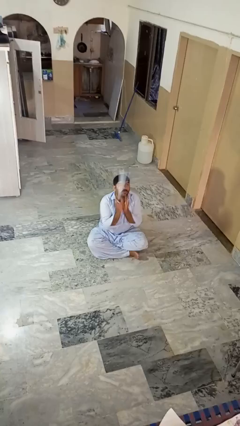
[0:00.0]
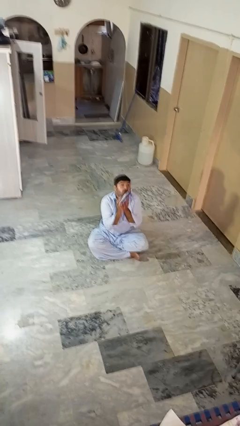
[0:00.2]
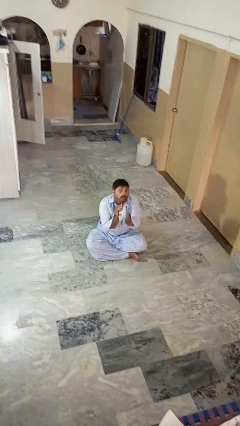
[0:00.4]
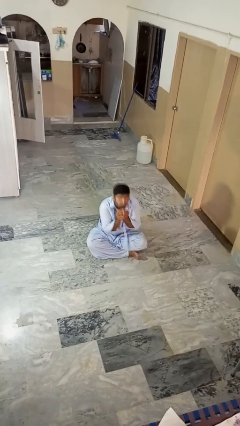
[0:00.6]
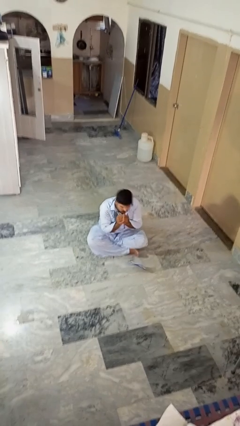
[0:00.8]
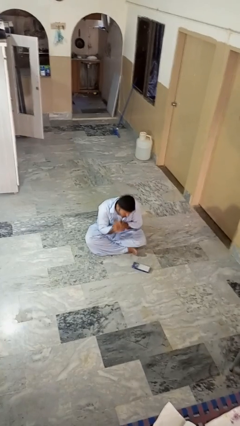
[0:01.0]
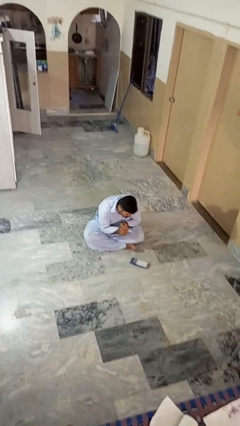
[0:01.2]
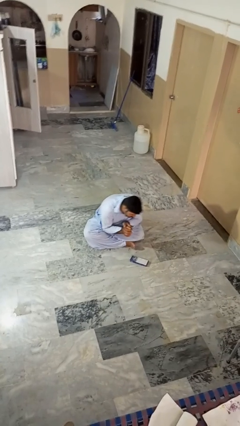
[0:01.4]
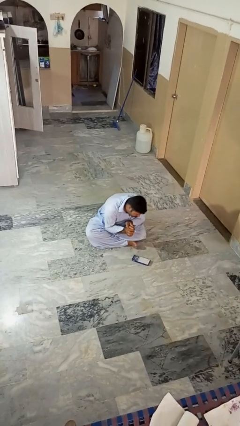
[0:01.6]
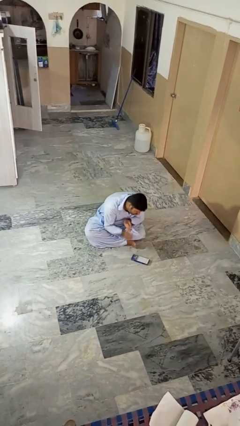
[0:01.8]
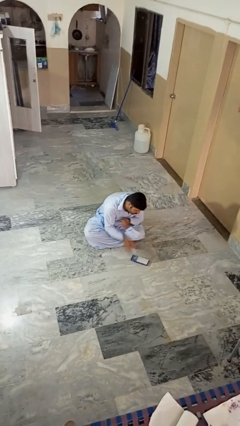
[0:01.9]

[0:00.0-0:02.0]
person catches dropped object

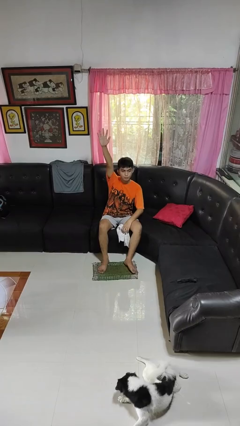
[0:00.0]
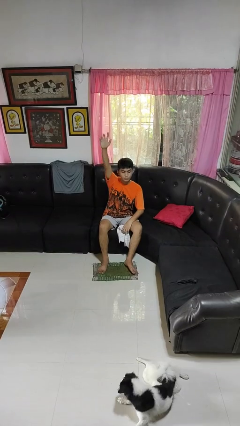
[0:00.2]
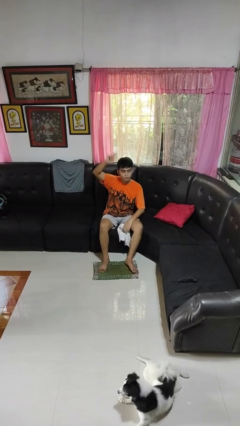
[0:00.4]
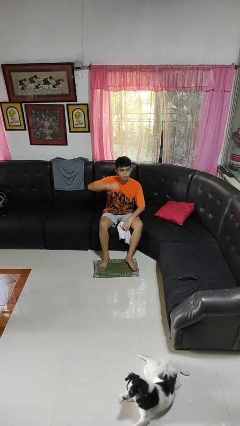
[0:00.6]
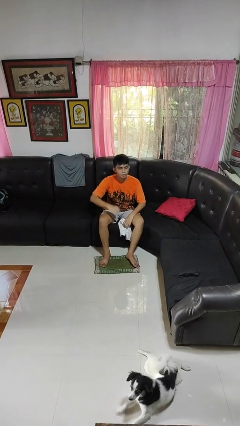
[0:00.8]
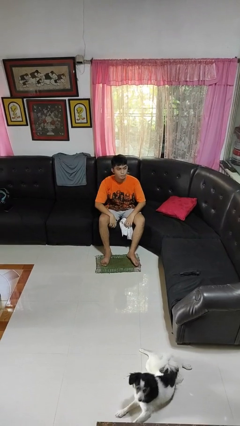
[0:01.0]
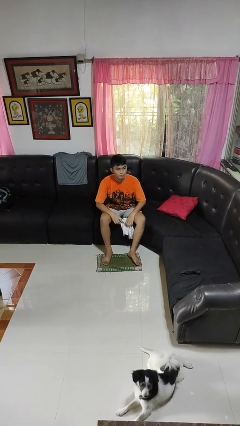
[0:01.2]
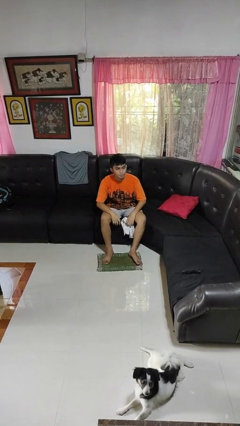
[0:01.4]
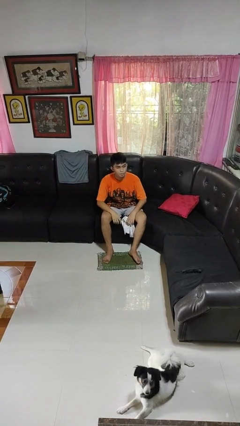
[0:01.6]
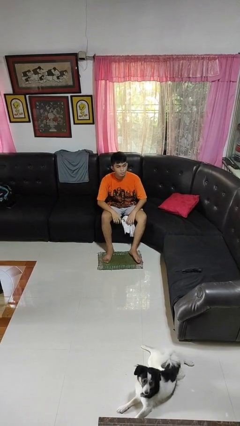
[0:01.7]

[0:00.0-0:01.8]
person gestures lower hand

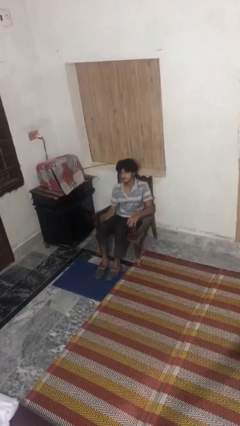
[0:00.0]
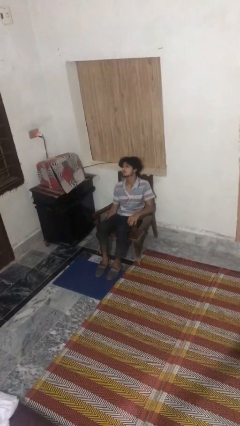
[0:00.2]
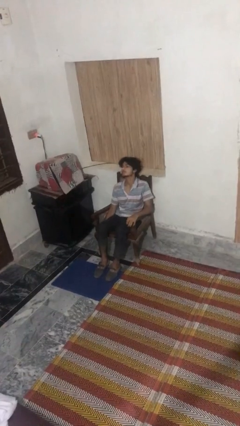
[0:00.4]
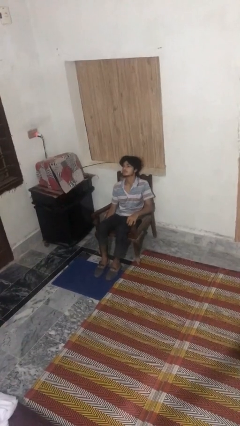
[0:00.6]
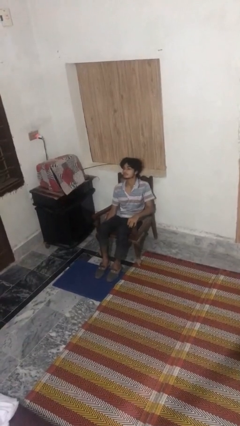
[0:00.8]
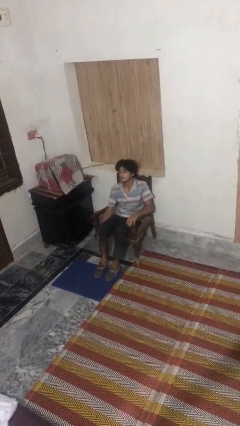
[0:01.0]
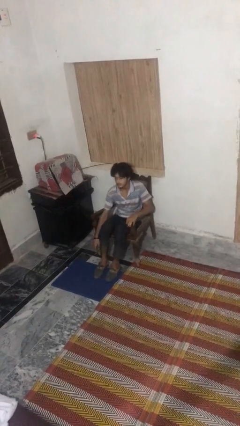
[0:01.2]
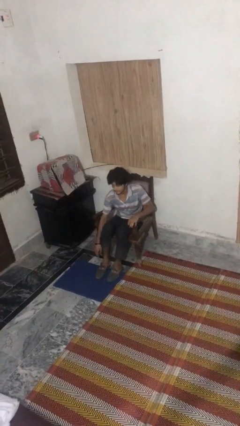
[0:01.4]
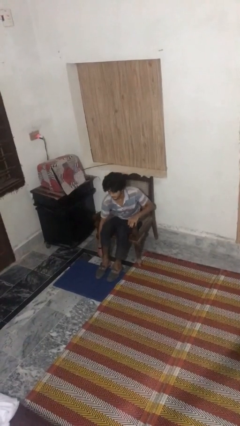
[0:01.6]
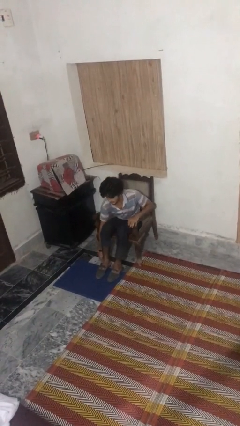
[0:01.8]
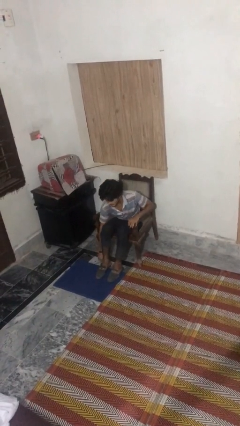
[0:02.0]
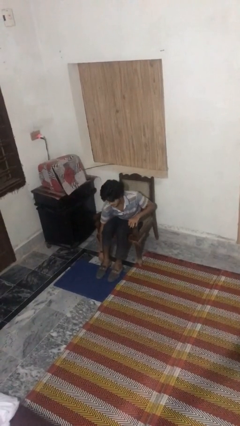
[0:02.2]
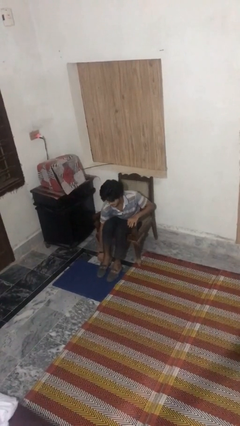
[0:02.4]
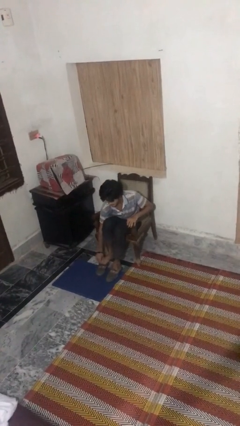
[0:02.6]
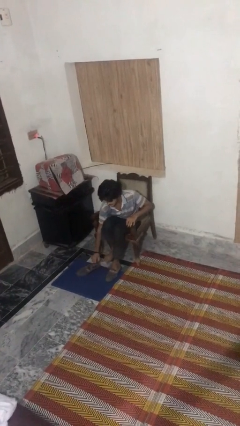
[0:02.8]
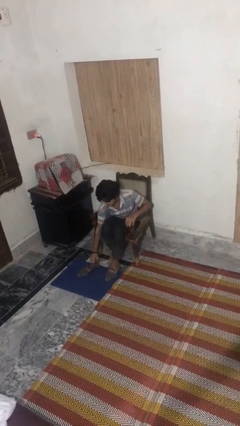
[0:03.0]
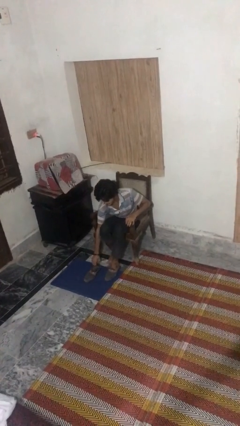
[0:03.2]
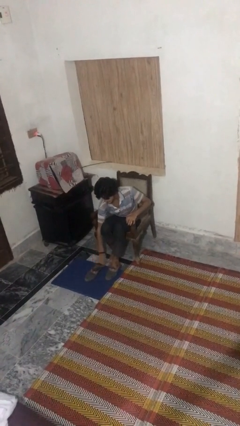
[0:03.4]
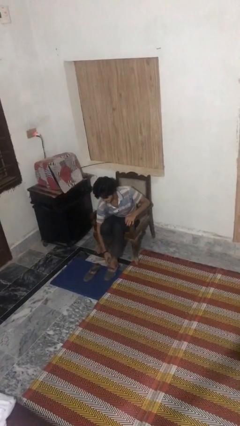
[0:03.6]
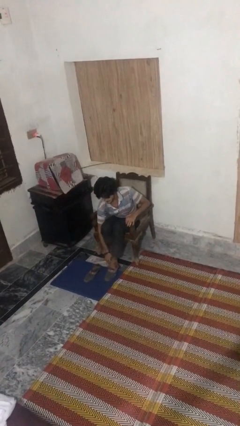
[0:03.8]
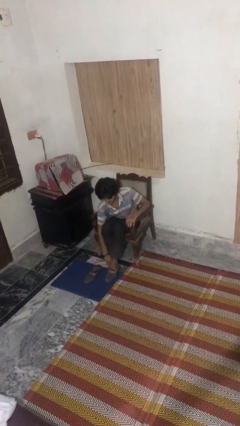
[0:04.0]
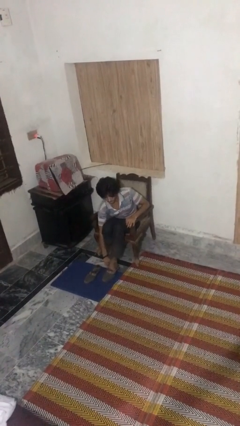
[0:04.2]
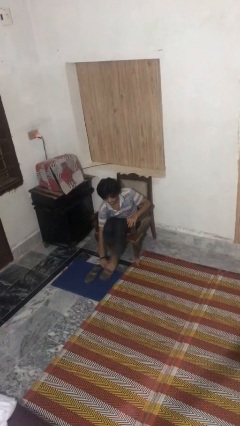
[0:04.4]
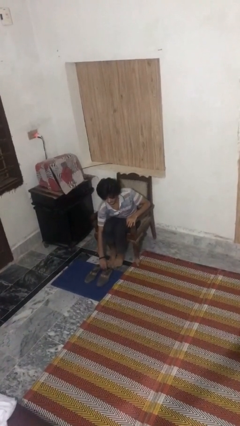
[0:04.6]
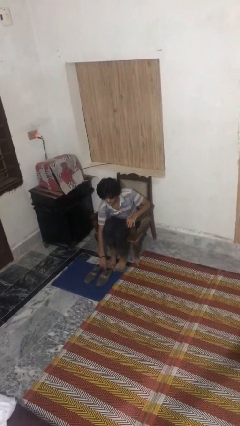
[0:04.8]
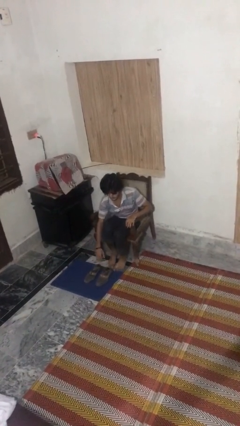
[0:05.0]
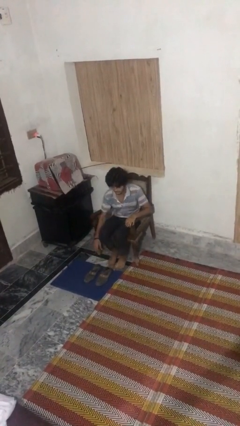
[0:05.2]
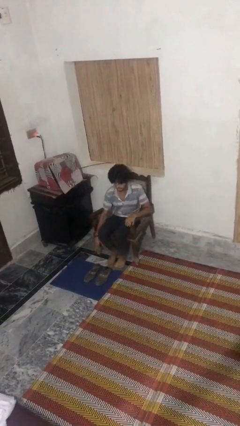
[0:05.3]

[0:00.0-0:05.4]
person takes off shoes

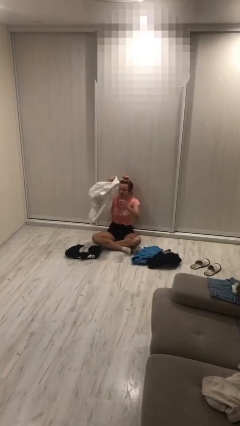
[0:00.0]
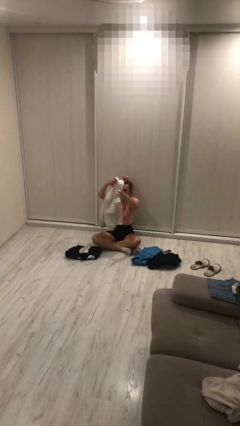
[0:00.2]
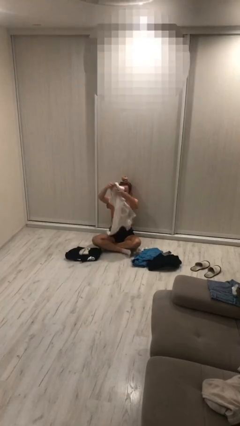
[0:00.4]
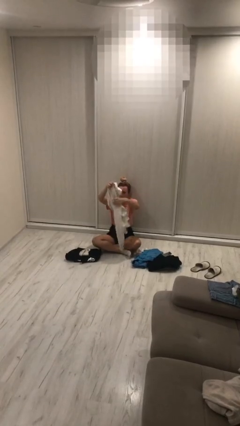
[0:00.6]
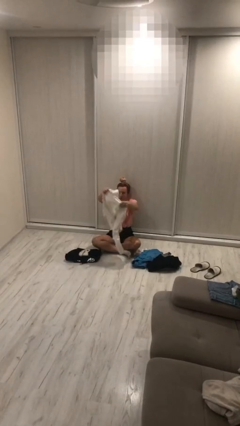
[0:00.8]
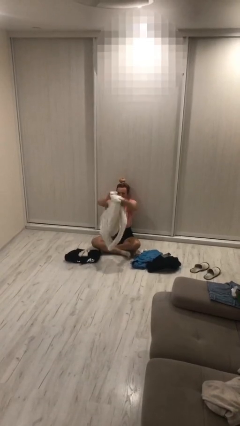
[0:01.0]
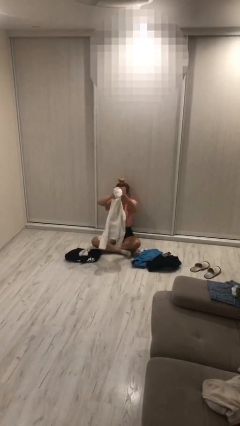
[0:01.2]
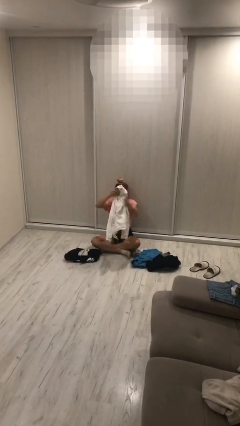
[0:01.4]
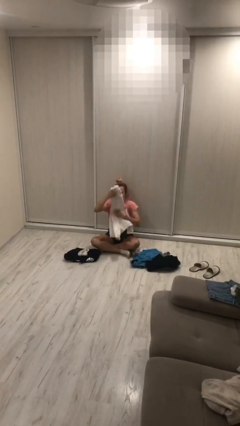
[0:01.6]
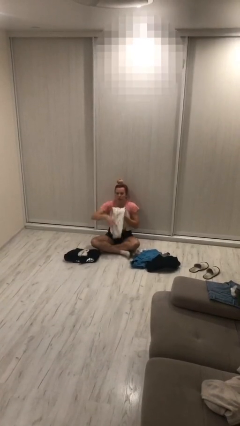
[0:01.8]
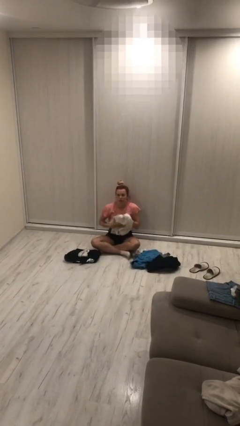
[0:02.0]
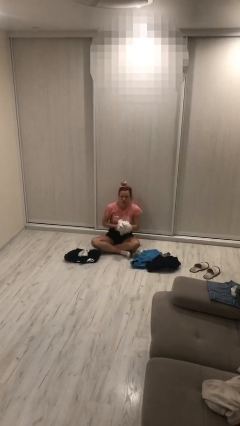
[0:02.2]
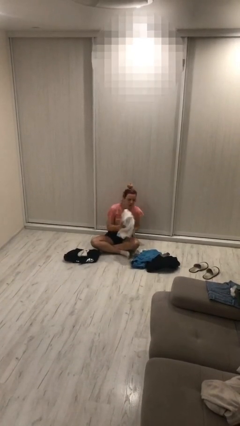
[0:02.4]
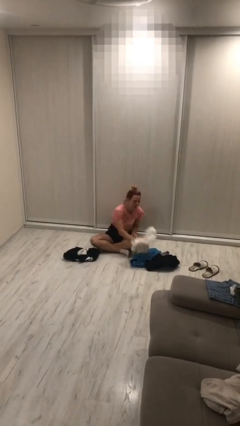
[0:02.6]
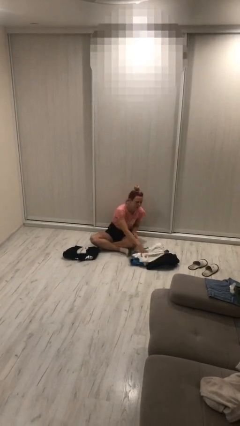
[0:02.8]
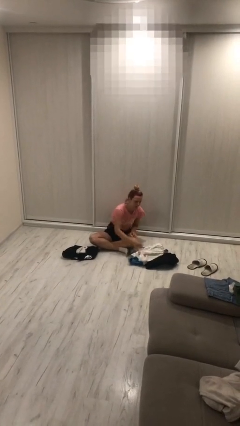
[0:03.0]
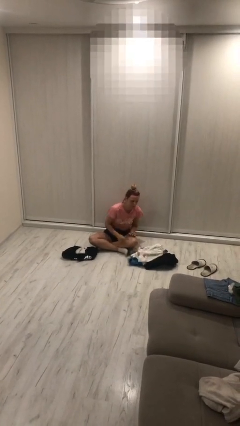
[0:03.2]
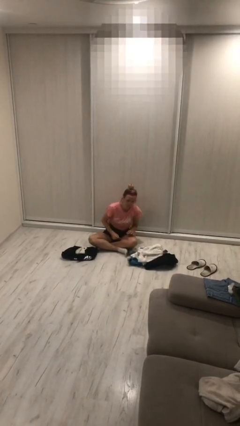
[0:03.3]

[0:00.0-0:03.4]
person folds shirt

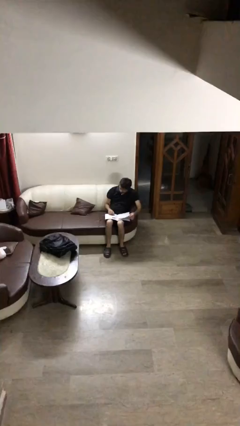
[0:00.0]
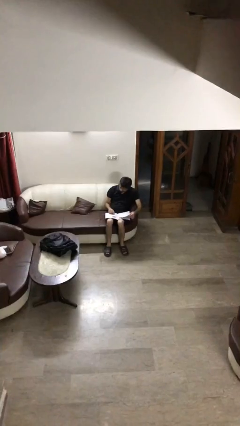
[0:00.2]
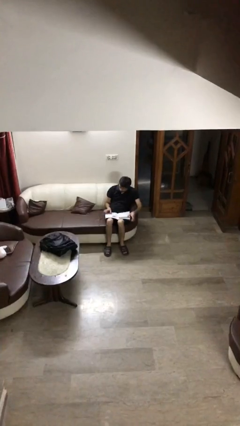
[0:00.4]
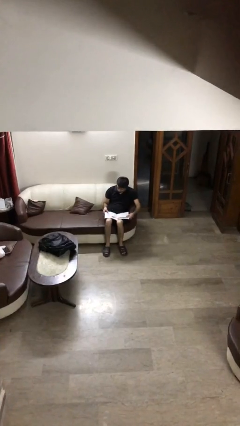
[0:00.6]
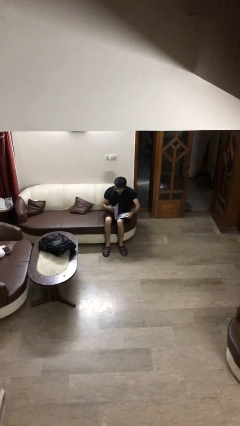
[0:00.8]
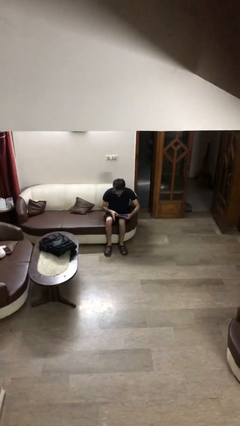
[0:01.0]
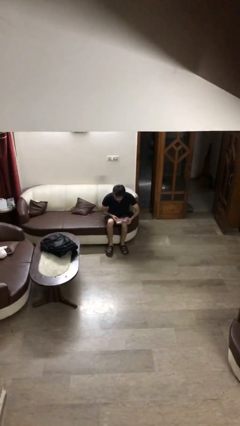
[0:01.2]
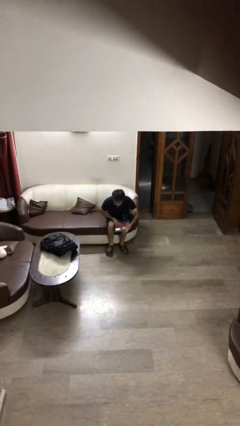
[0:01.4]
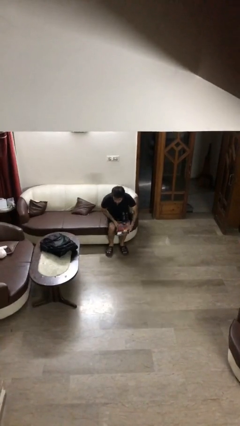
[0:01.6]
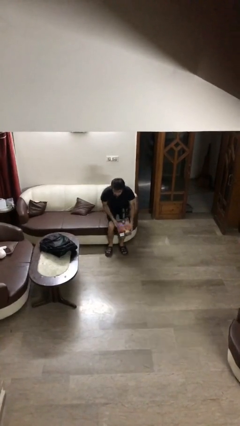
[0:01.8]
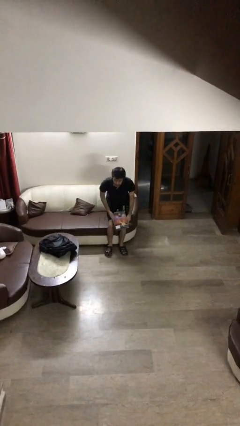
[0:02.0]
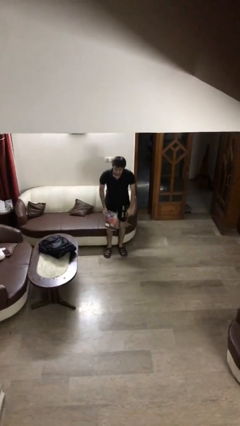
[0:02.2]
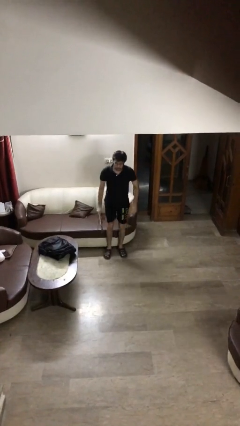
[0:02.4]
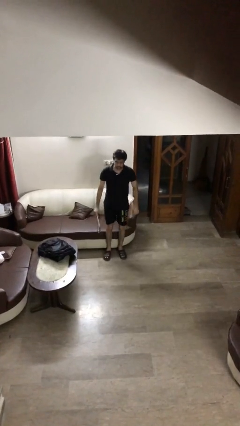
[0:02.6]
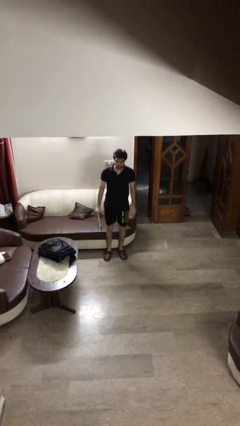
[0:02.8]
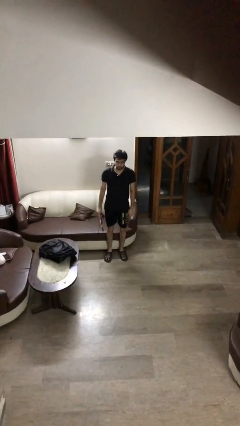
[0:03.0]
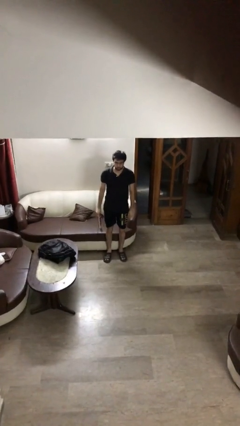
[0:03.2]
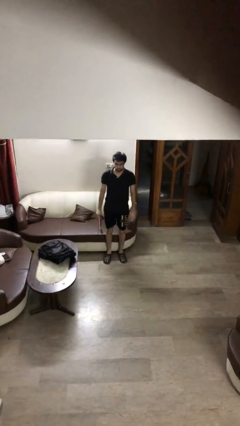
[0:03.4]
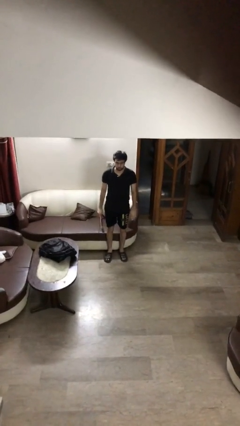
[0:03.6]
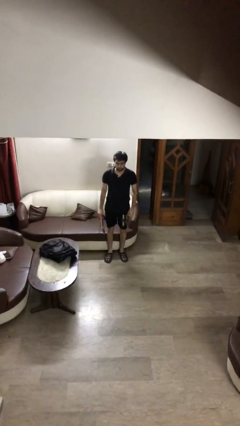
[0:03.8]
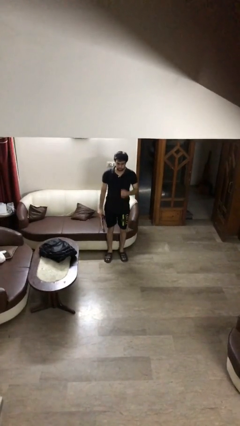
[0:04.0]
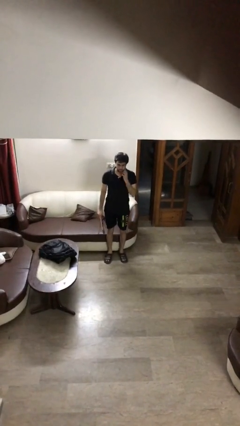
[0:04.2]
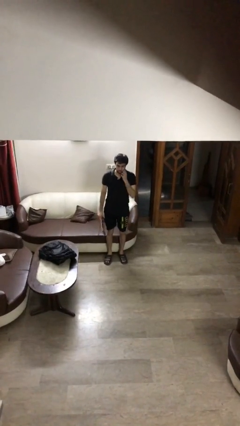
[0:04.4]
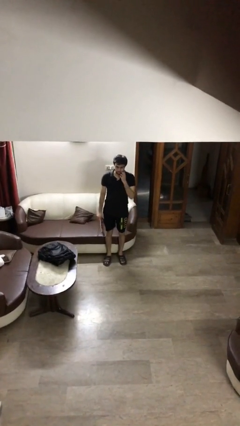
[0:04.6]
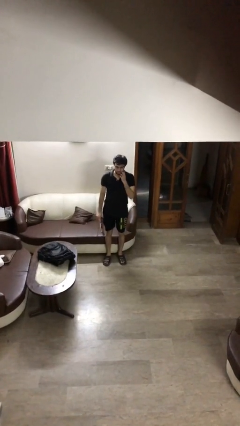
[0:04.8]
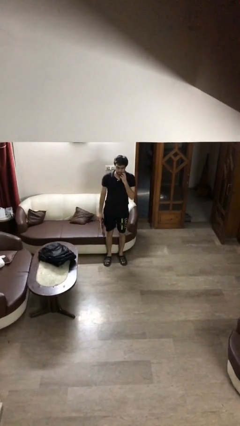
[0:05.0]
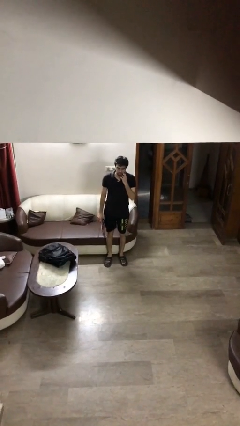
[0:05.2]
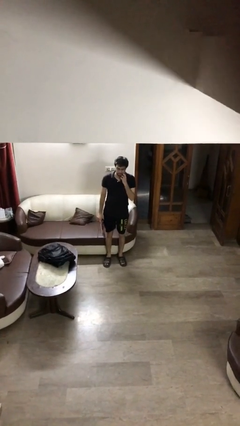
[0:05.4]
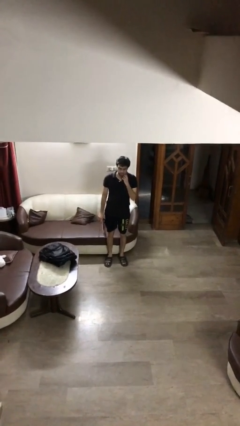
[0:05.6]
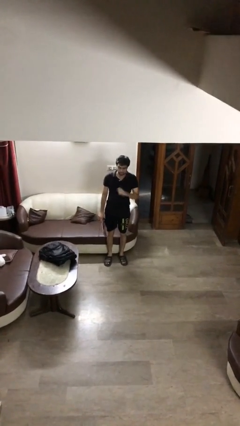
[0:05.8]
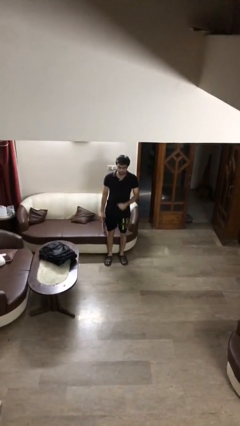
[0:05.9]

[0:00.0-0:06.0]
person stands up
